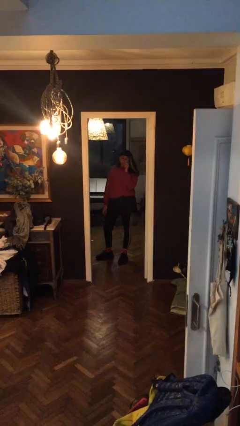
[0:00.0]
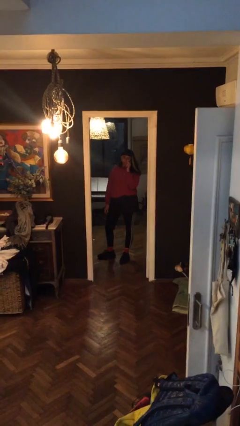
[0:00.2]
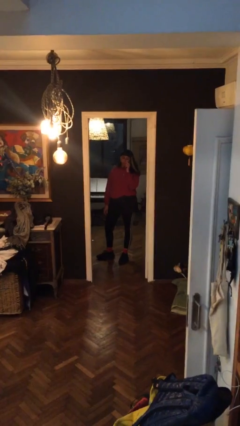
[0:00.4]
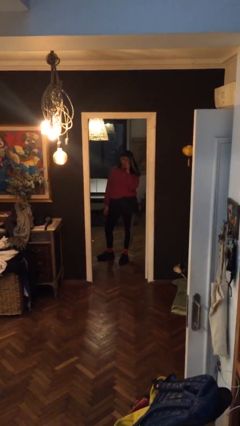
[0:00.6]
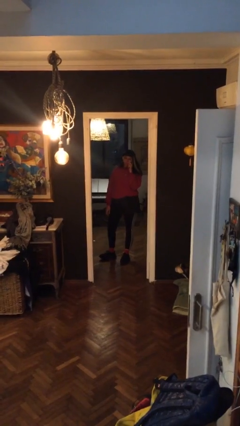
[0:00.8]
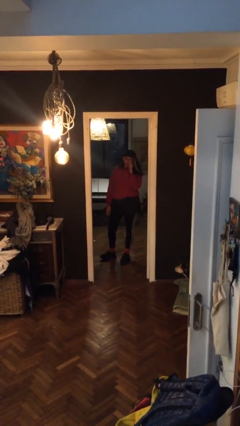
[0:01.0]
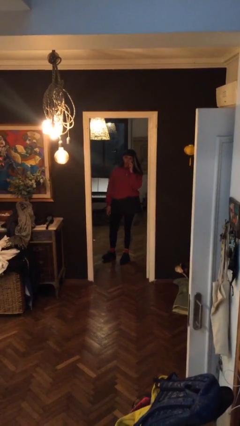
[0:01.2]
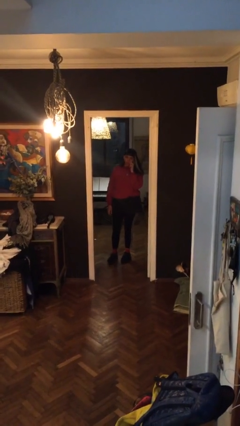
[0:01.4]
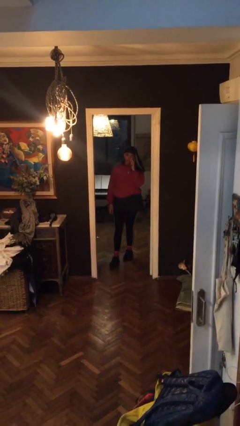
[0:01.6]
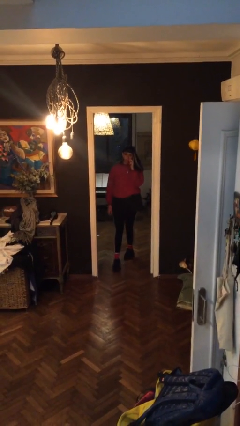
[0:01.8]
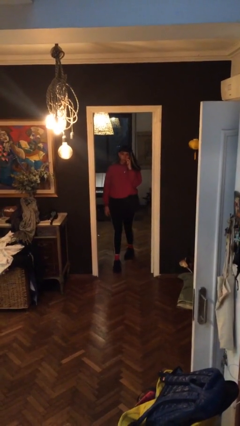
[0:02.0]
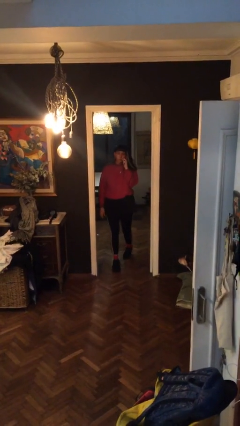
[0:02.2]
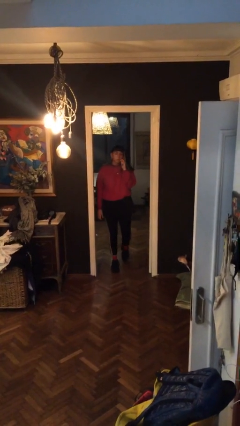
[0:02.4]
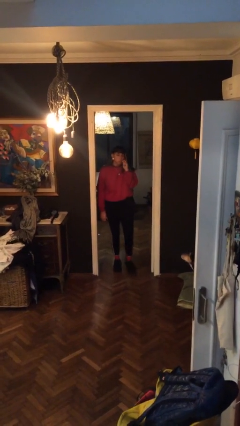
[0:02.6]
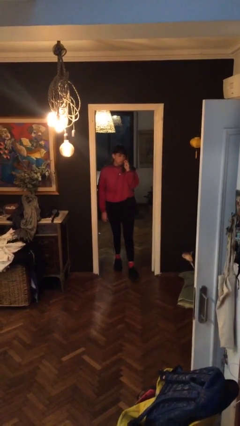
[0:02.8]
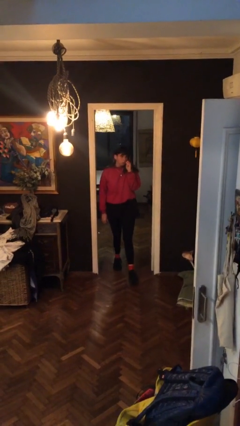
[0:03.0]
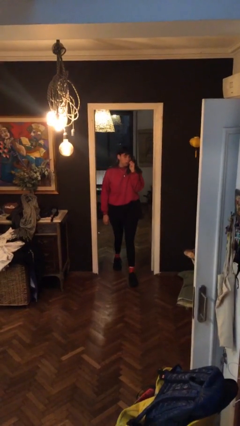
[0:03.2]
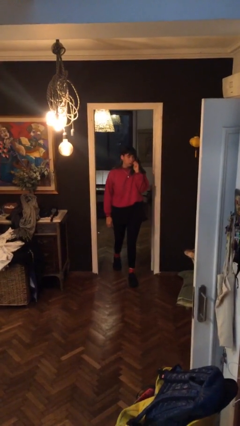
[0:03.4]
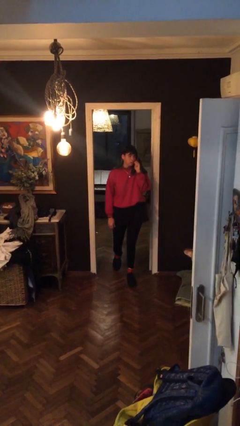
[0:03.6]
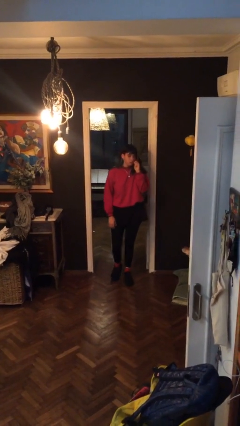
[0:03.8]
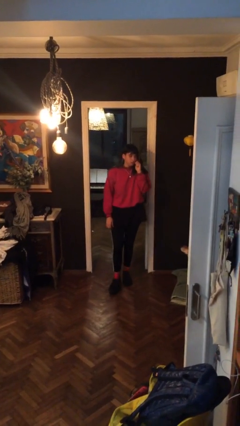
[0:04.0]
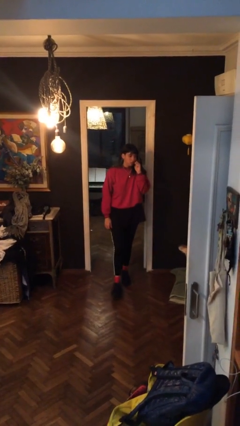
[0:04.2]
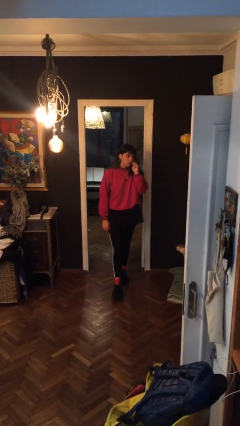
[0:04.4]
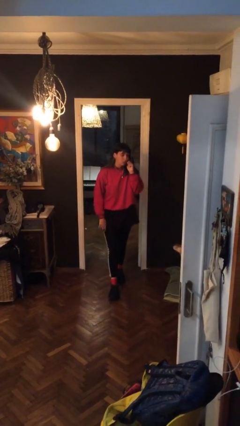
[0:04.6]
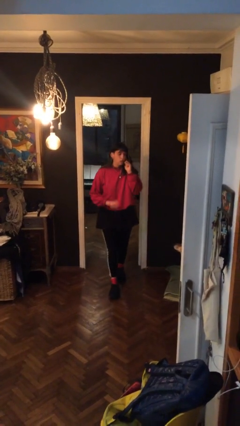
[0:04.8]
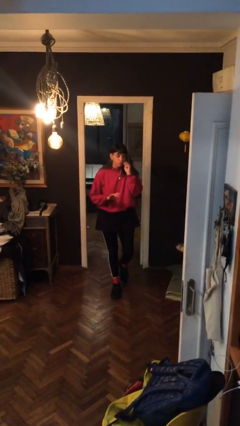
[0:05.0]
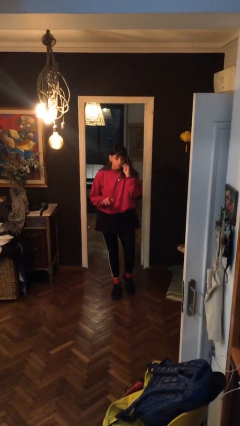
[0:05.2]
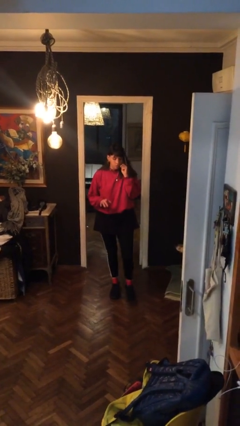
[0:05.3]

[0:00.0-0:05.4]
person enters scene through structure

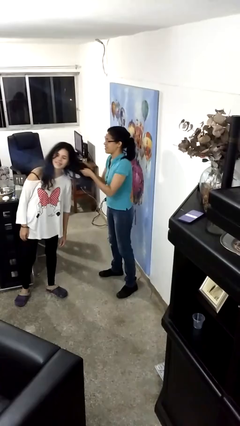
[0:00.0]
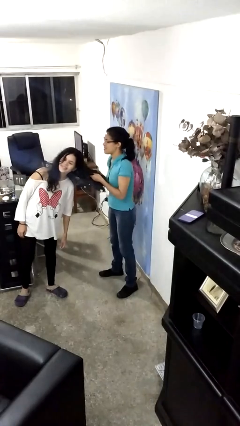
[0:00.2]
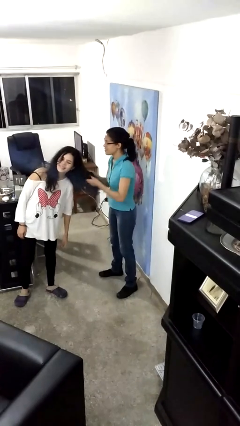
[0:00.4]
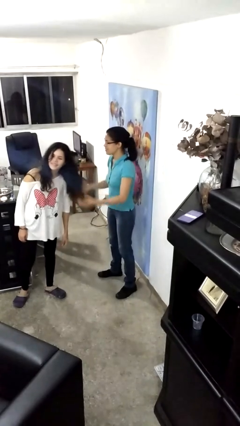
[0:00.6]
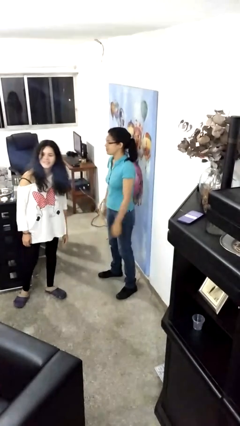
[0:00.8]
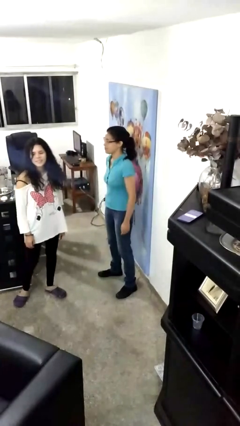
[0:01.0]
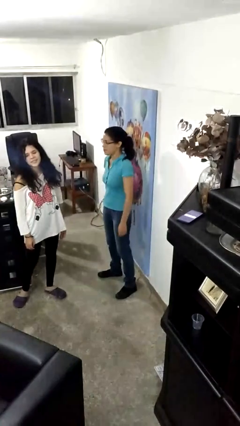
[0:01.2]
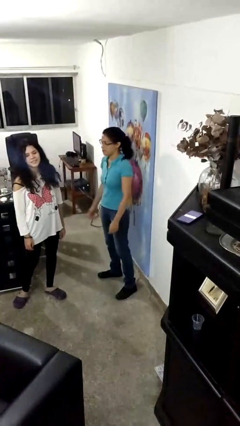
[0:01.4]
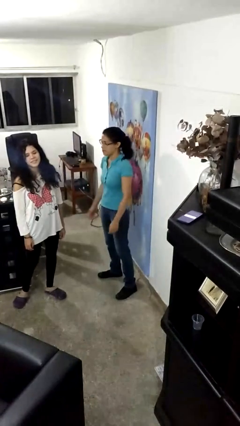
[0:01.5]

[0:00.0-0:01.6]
person grabs person by hair

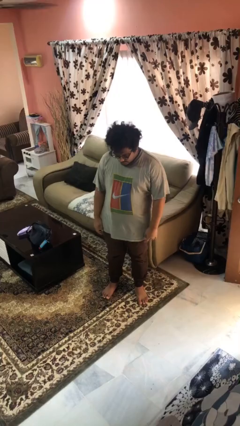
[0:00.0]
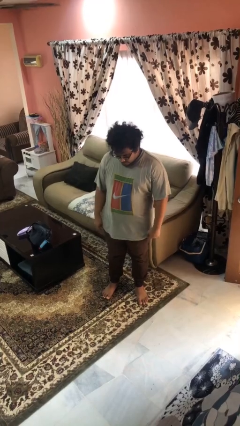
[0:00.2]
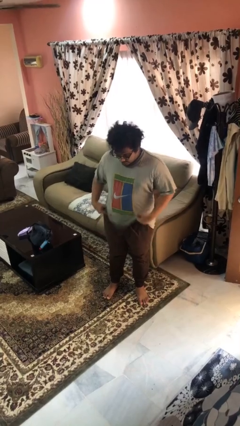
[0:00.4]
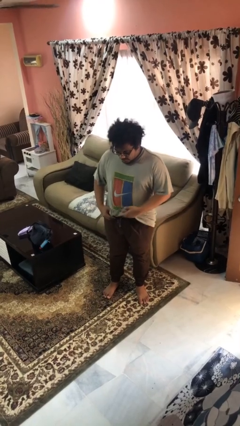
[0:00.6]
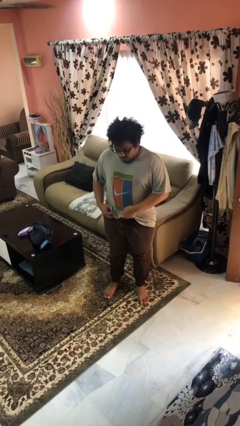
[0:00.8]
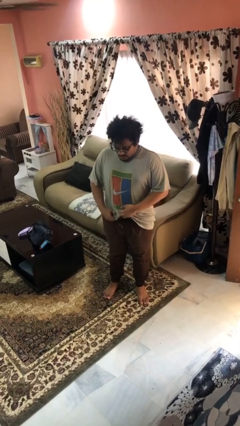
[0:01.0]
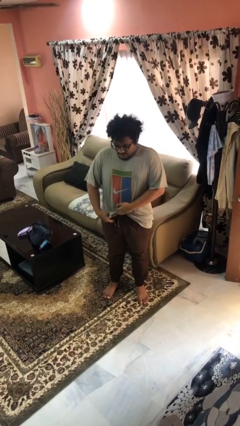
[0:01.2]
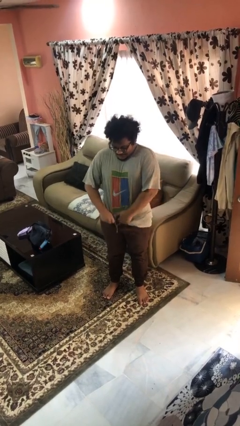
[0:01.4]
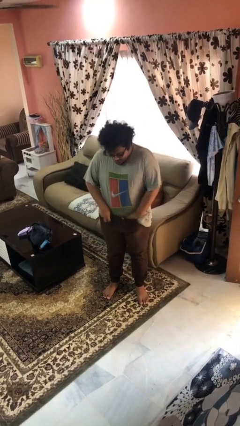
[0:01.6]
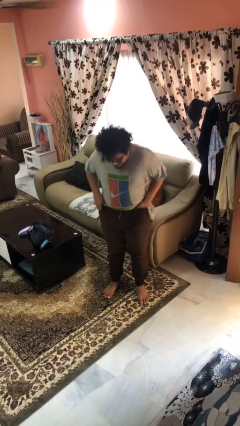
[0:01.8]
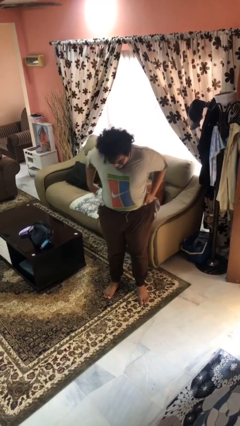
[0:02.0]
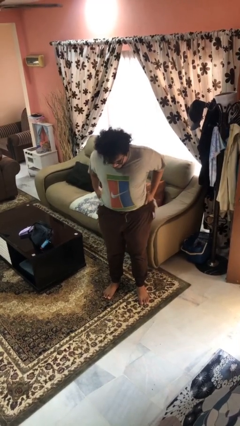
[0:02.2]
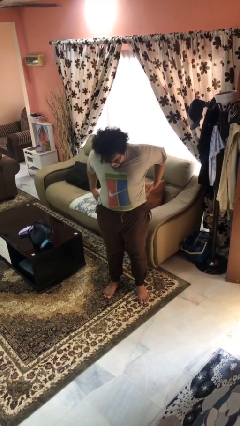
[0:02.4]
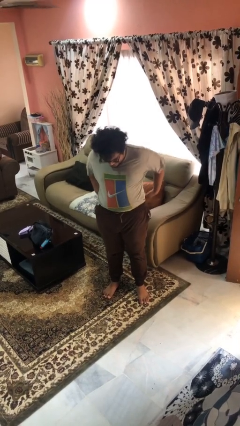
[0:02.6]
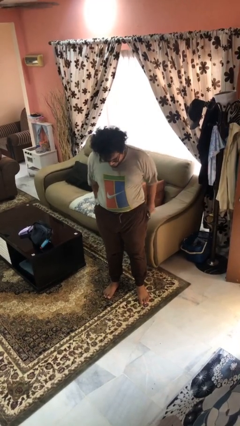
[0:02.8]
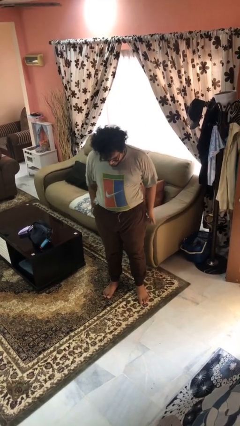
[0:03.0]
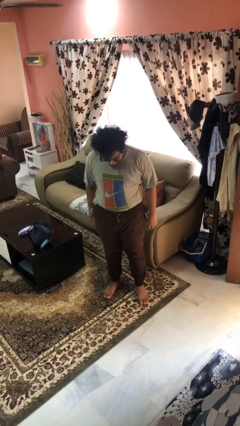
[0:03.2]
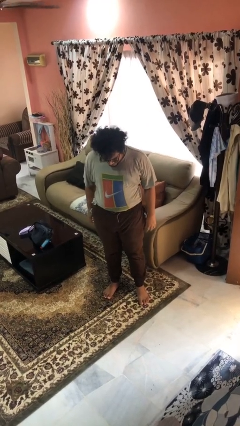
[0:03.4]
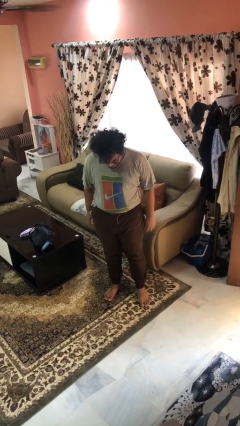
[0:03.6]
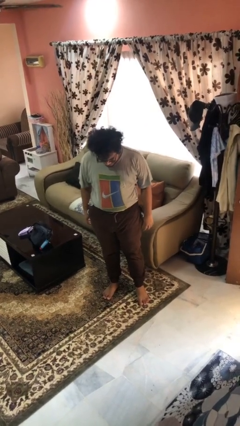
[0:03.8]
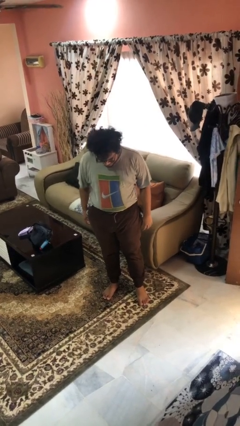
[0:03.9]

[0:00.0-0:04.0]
person tucks in shirt

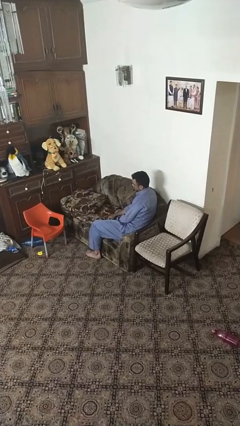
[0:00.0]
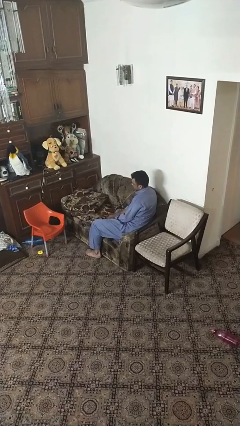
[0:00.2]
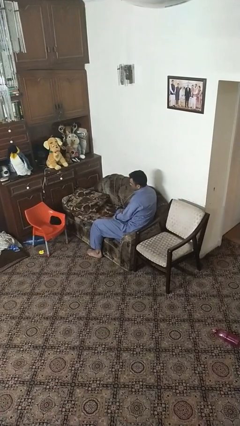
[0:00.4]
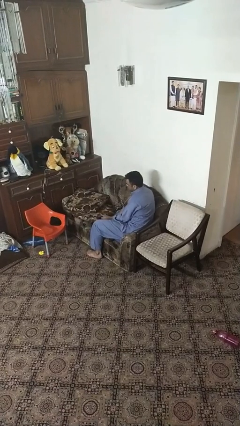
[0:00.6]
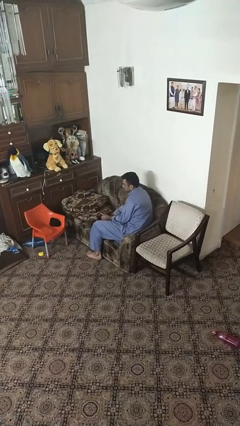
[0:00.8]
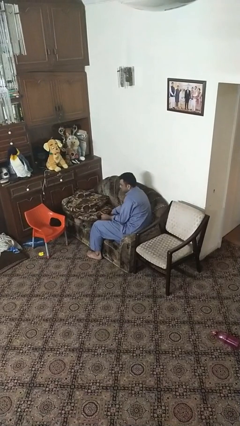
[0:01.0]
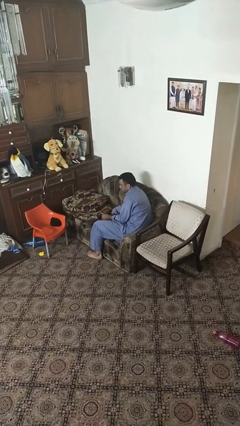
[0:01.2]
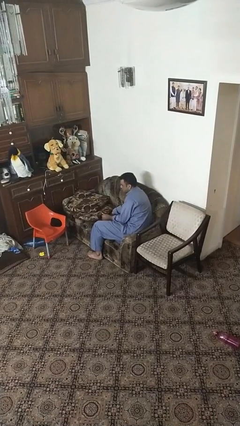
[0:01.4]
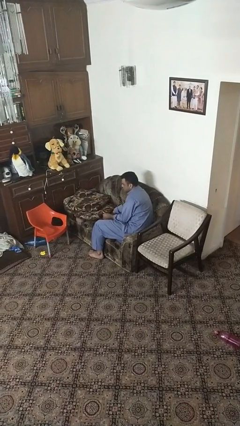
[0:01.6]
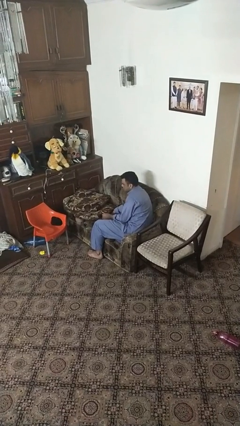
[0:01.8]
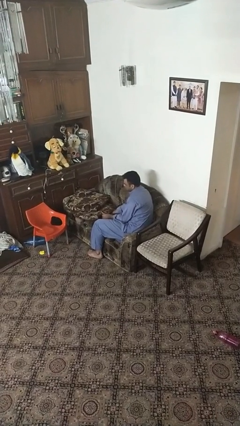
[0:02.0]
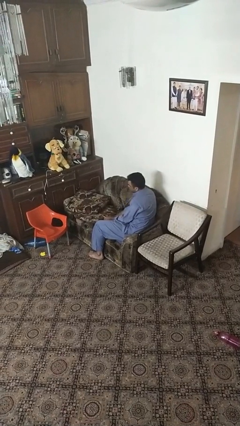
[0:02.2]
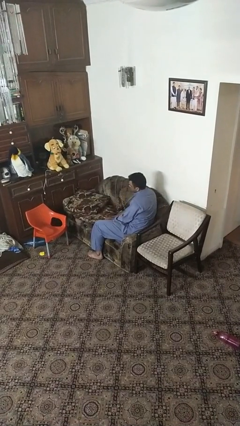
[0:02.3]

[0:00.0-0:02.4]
person searches in couch

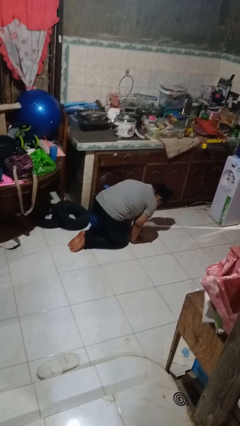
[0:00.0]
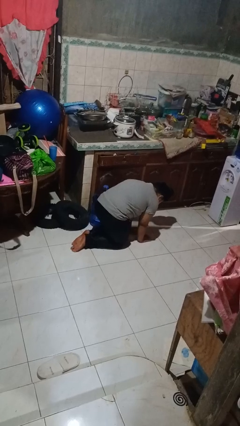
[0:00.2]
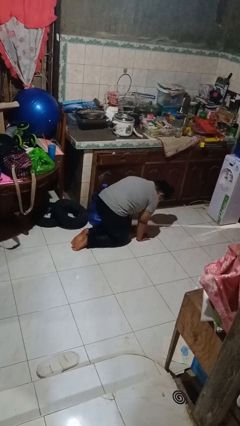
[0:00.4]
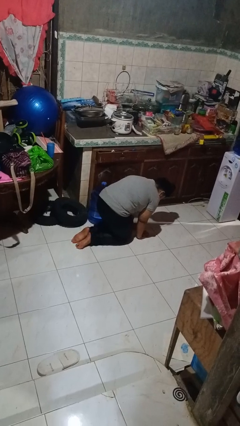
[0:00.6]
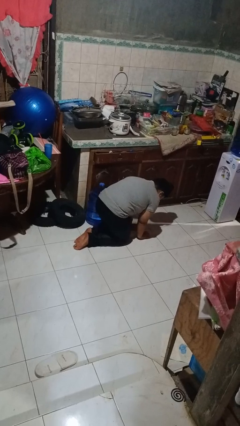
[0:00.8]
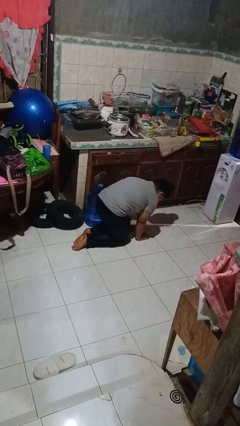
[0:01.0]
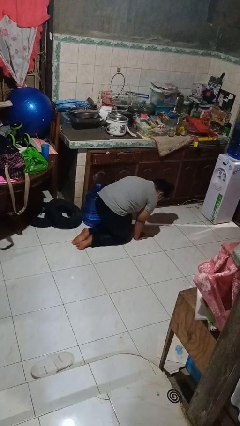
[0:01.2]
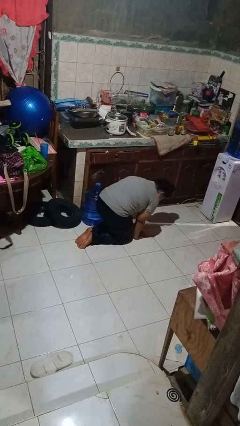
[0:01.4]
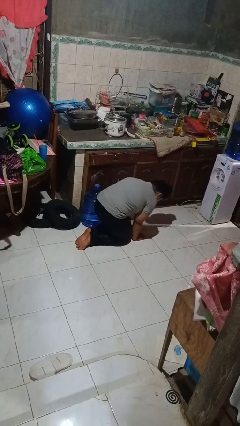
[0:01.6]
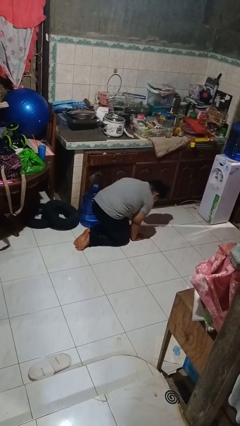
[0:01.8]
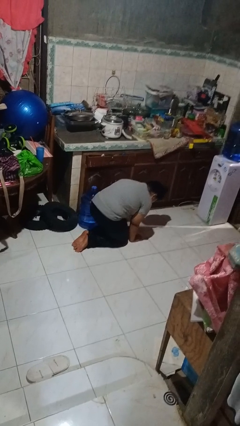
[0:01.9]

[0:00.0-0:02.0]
person crawls

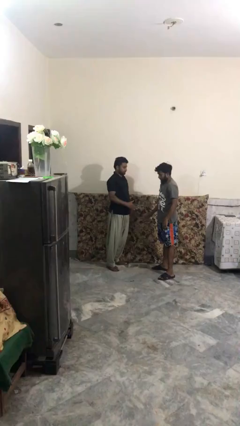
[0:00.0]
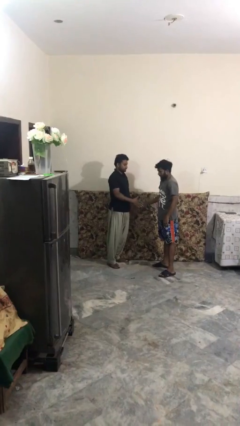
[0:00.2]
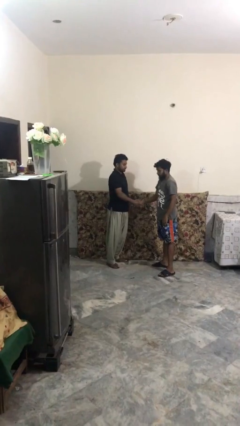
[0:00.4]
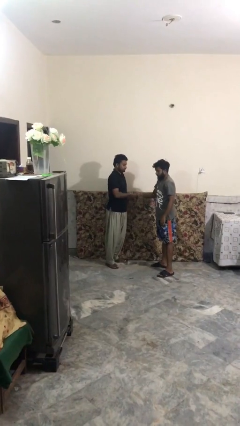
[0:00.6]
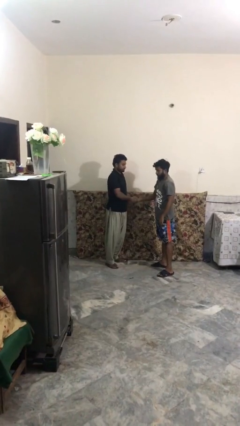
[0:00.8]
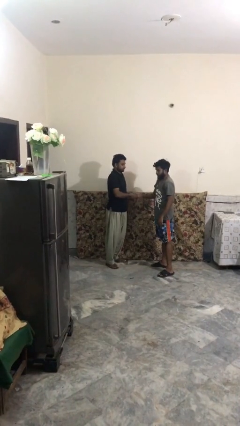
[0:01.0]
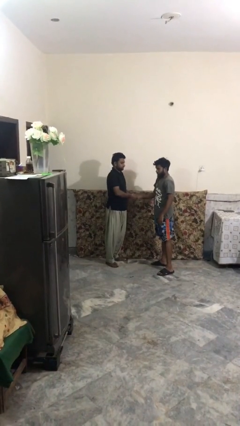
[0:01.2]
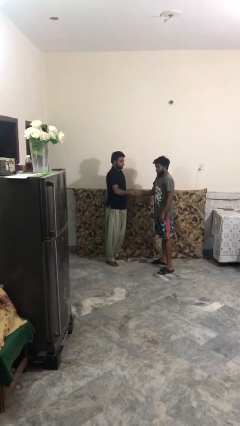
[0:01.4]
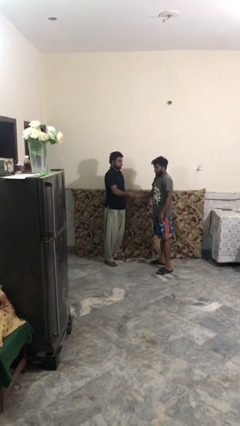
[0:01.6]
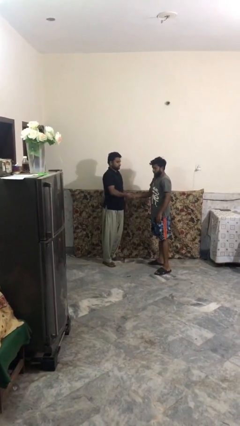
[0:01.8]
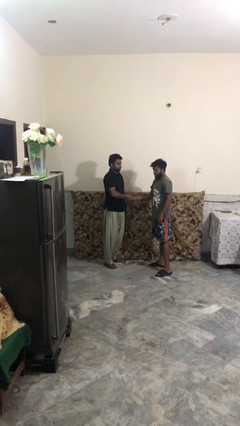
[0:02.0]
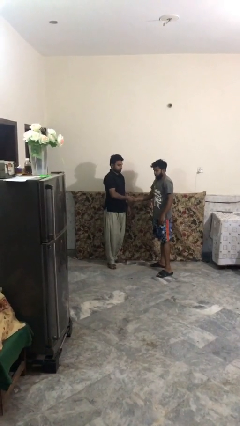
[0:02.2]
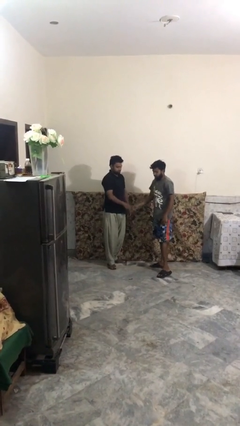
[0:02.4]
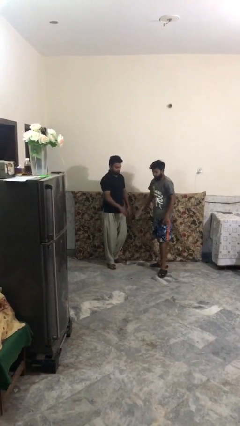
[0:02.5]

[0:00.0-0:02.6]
person shakes hand
